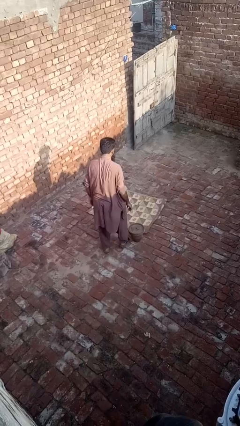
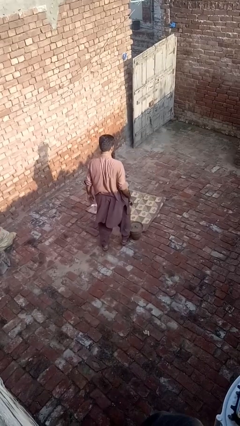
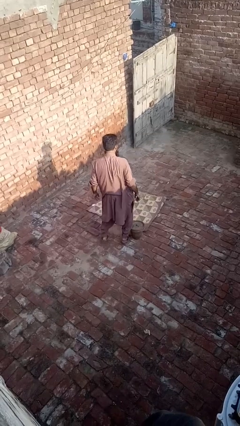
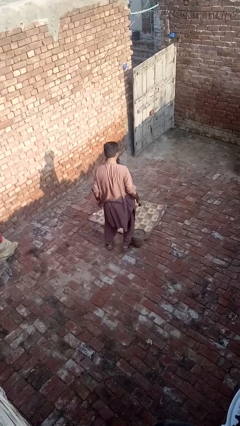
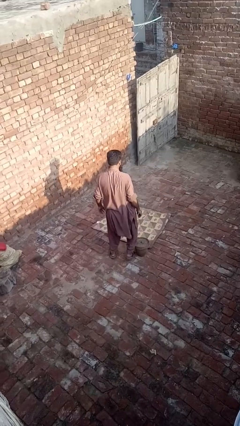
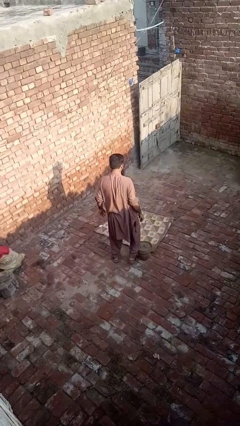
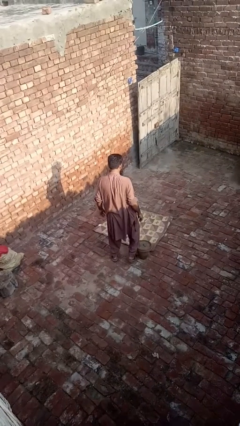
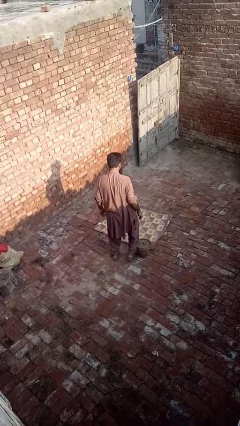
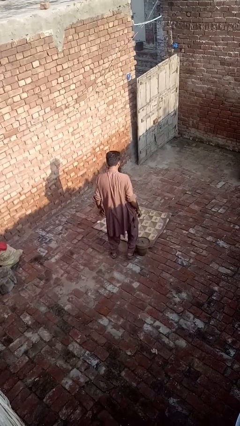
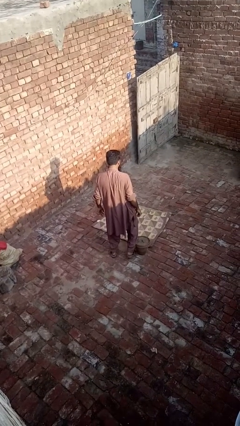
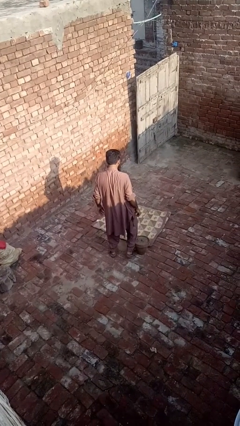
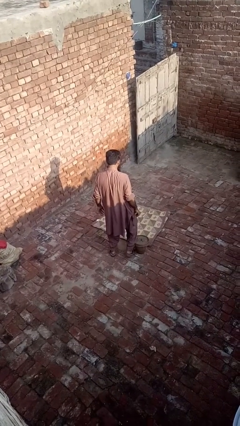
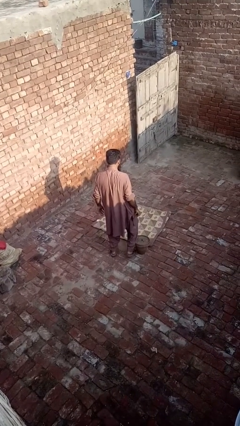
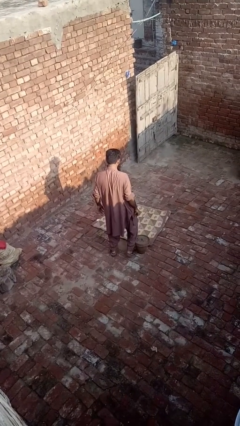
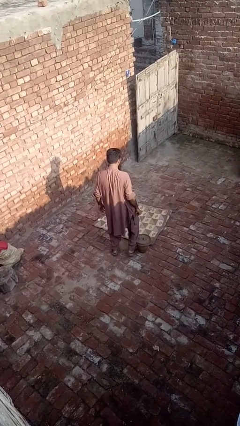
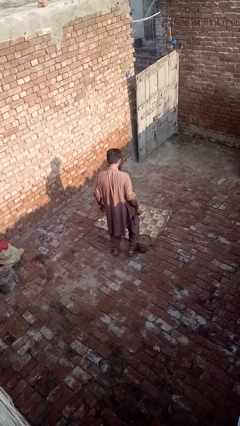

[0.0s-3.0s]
person trips on object on floor

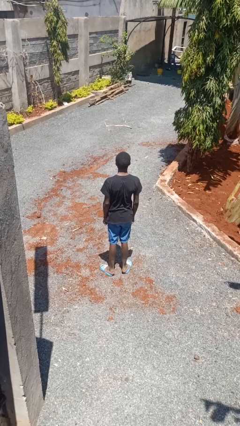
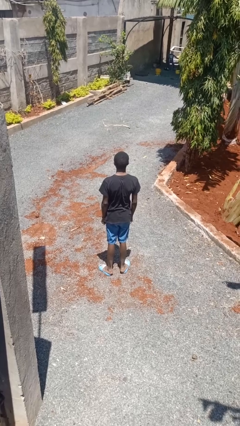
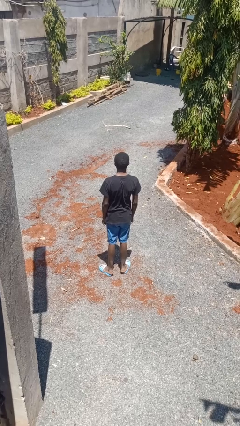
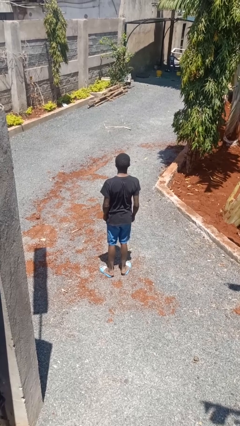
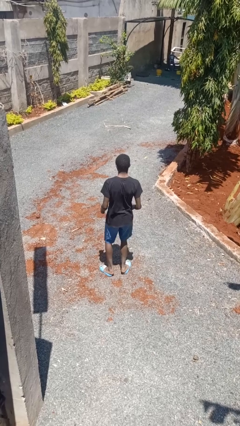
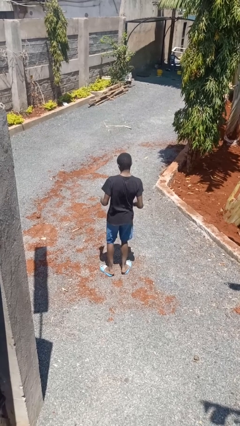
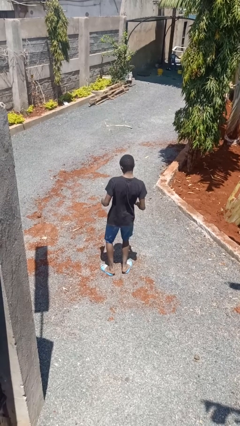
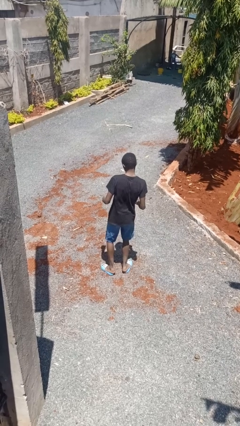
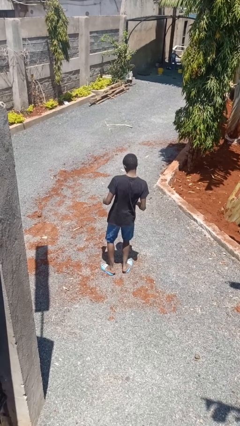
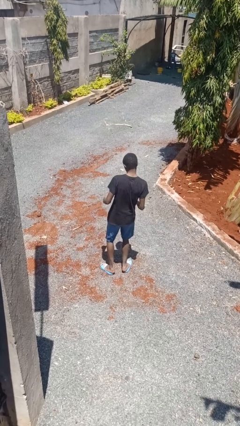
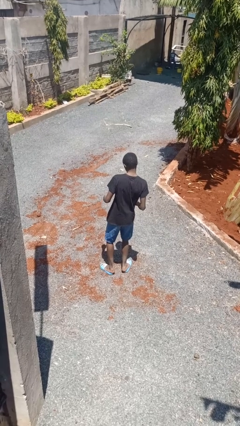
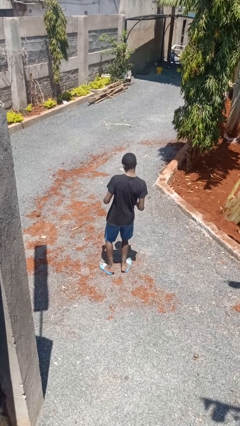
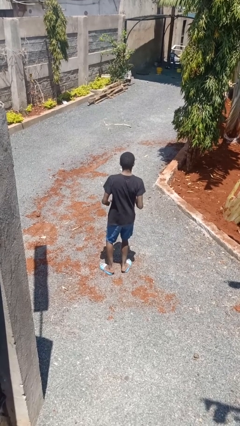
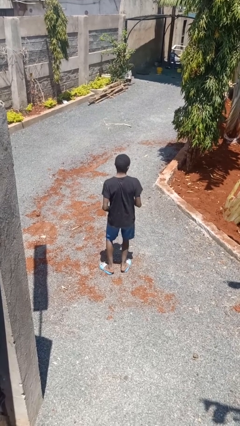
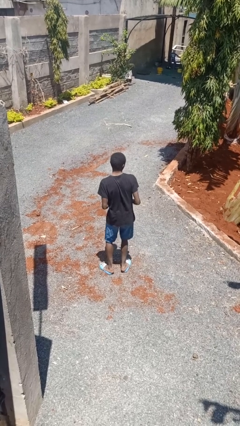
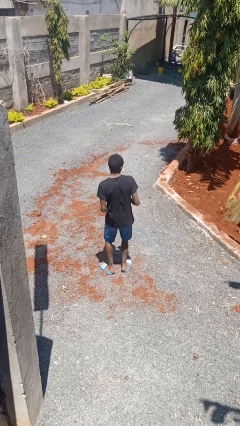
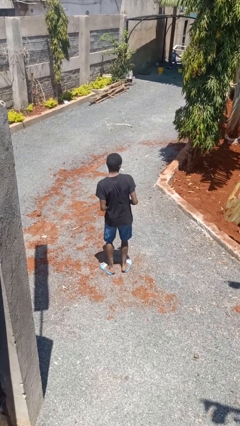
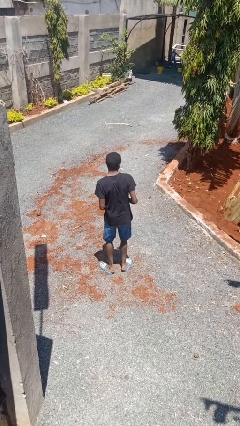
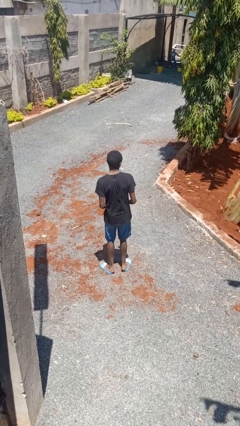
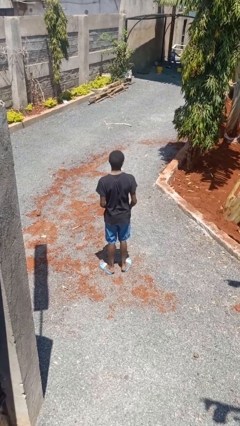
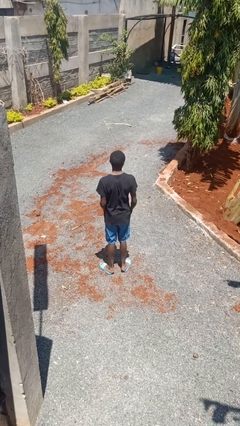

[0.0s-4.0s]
person dances in place

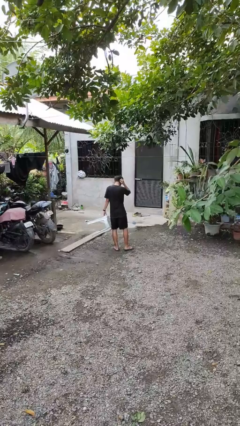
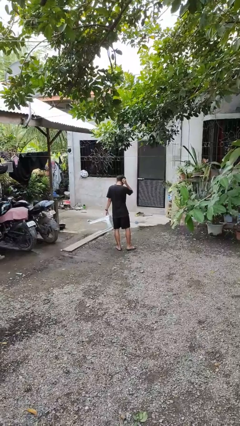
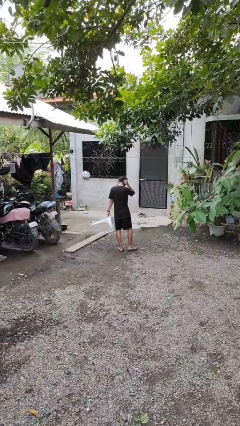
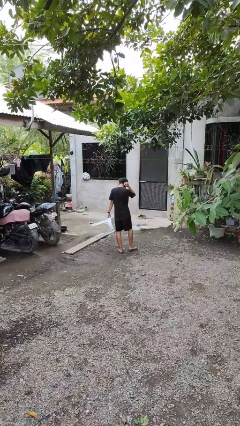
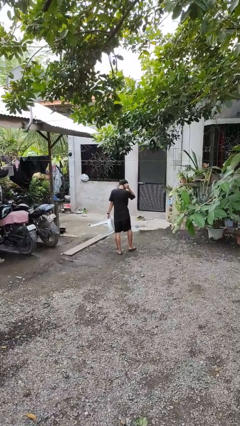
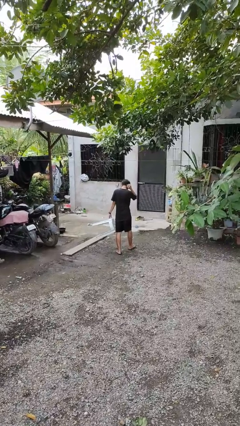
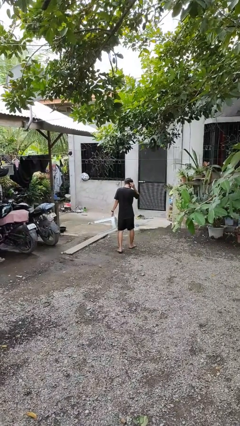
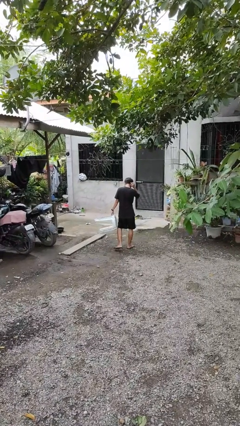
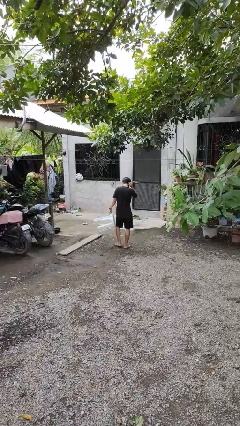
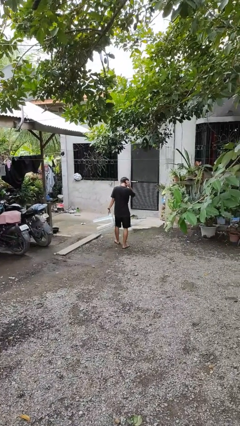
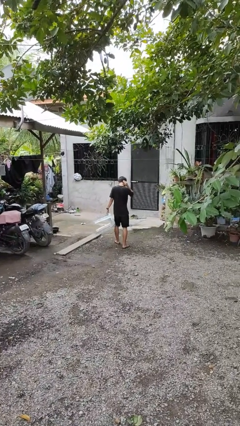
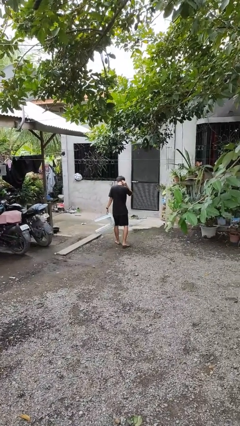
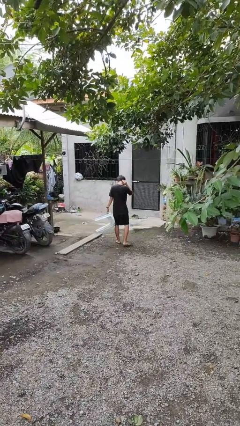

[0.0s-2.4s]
person carries furniture

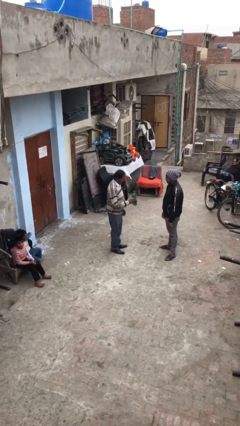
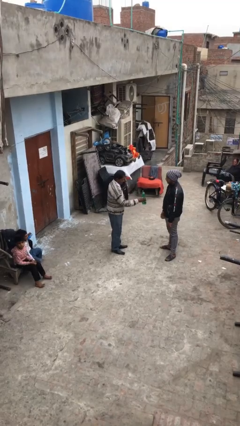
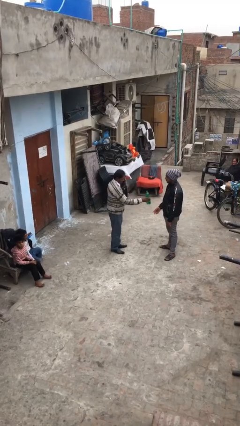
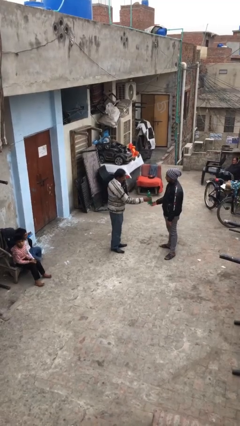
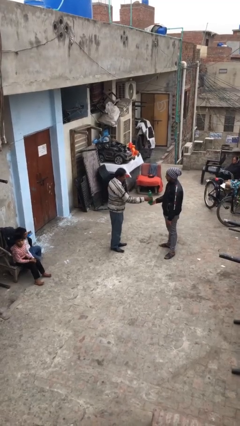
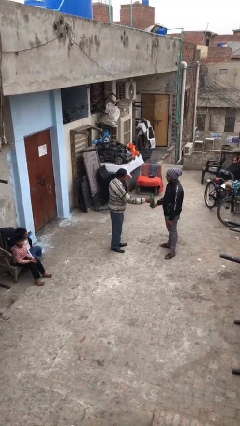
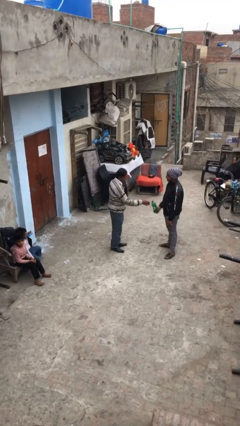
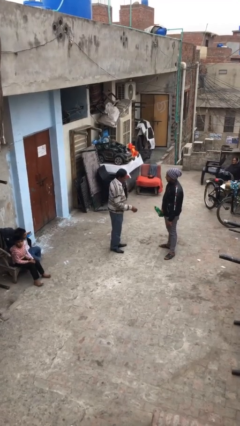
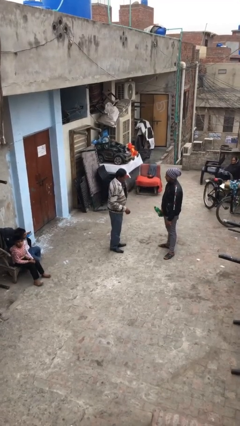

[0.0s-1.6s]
person transfers object to person

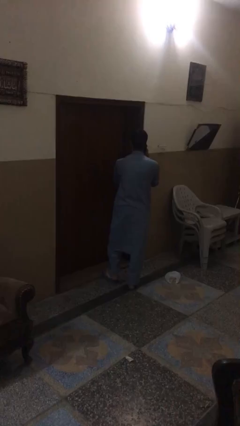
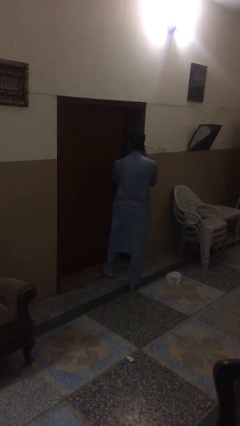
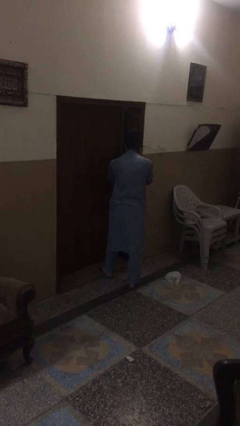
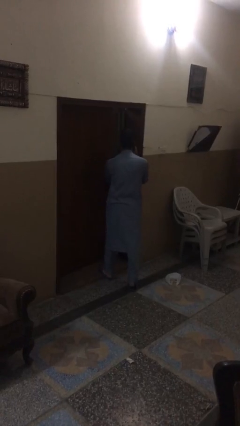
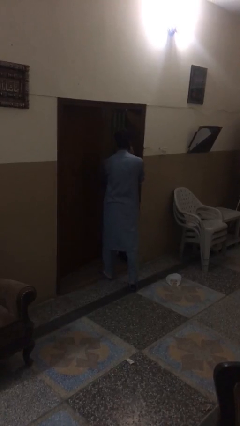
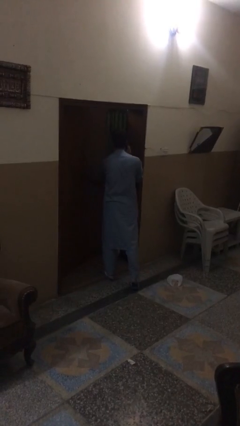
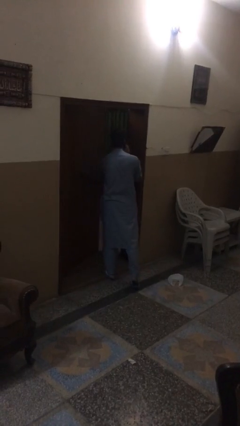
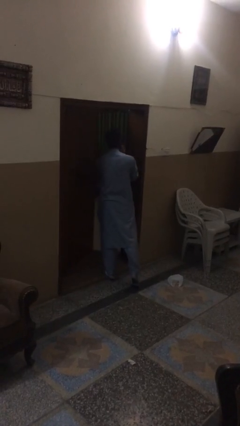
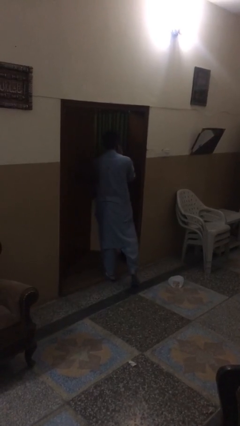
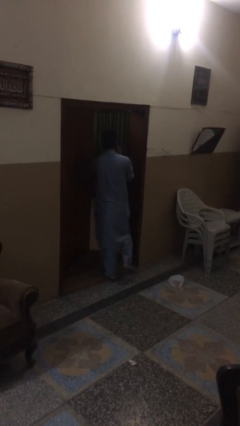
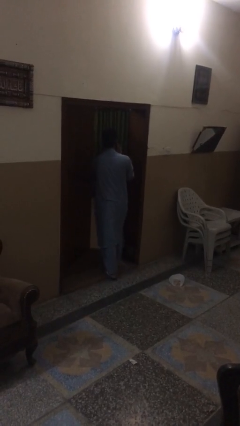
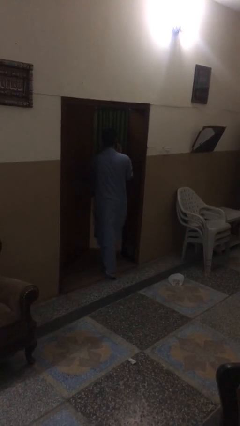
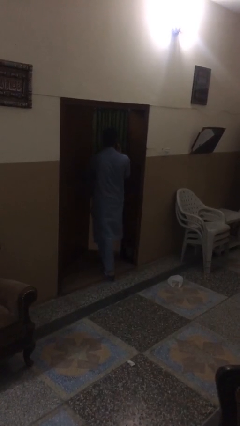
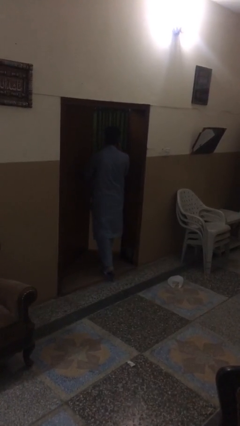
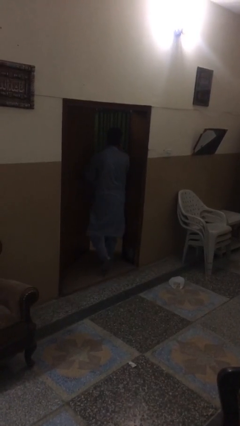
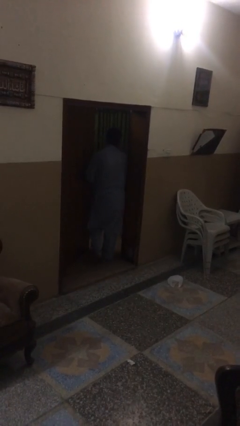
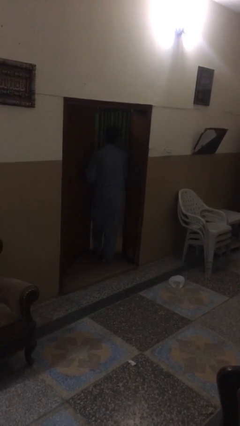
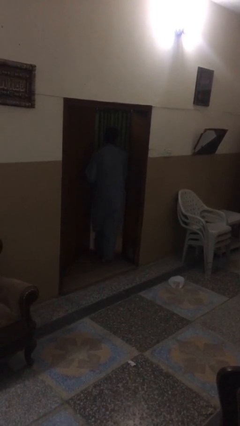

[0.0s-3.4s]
person opens facility door

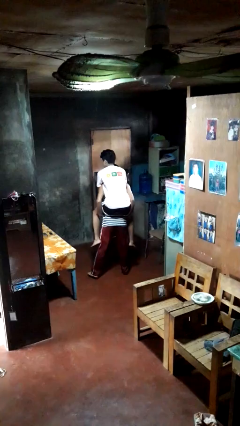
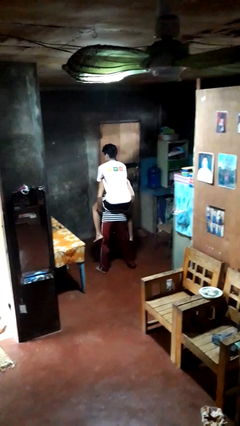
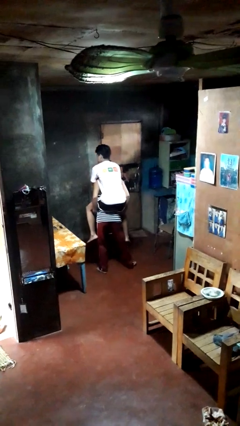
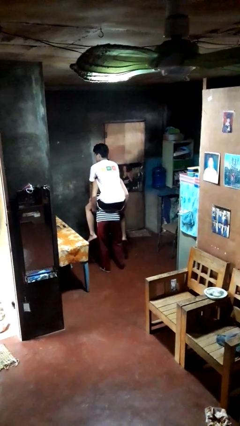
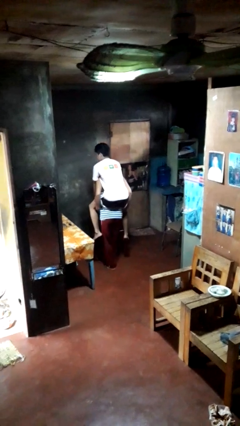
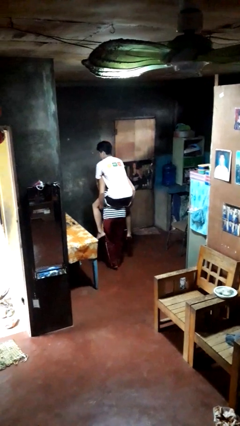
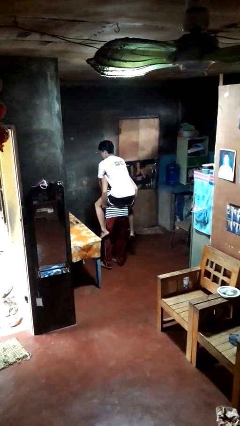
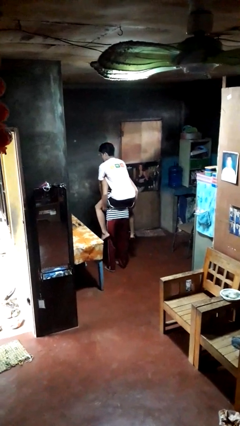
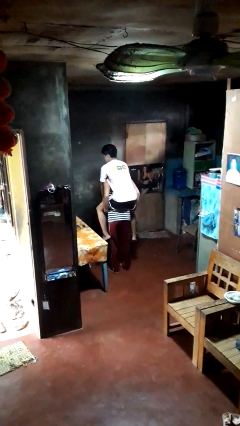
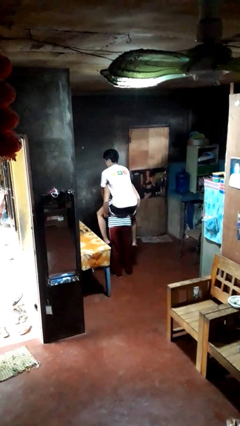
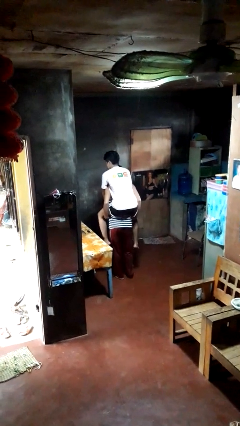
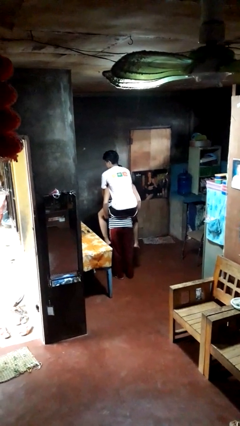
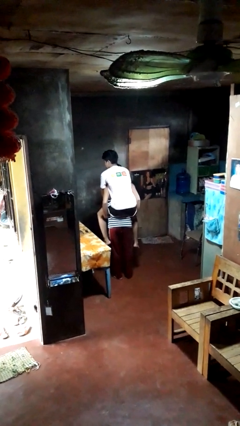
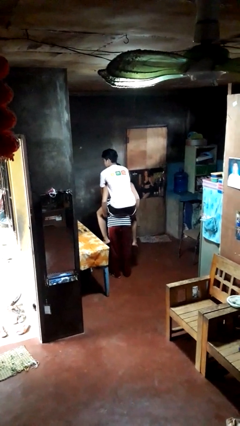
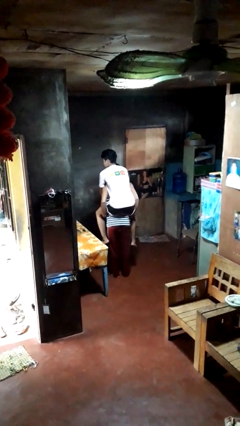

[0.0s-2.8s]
person carries person on back

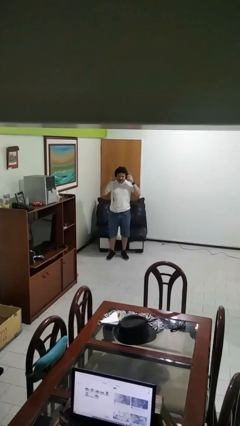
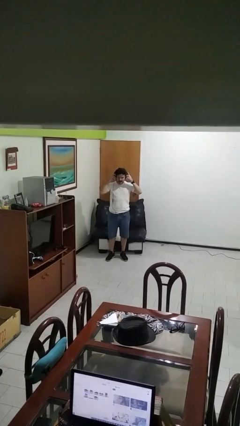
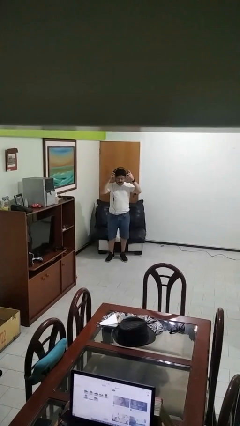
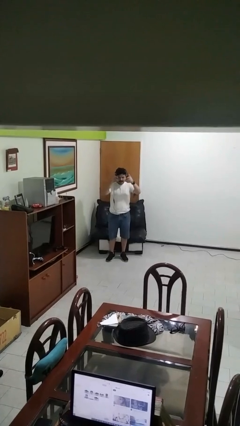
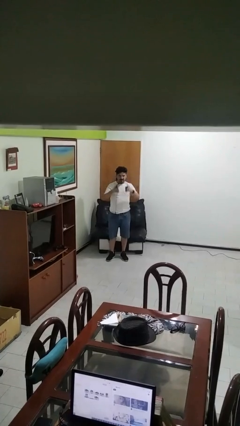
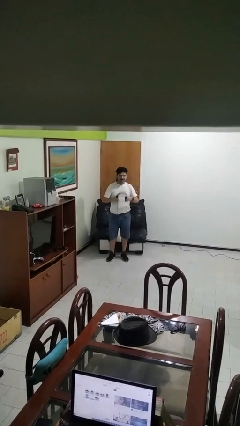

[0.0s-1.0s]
person takes off headphones
